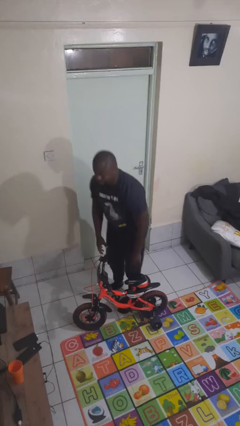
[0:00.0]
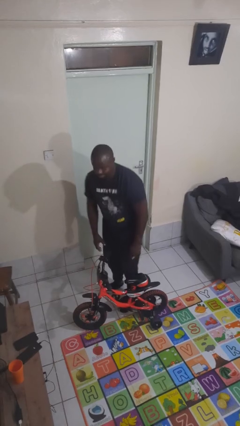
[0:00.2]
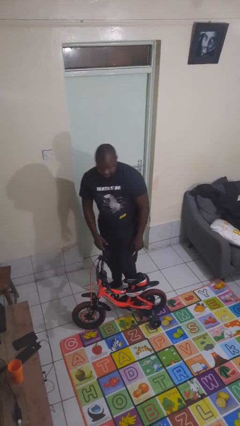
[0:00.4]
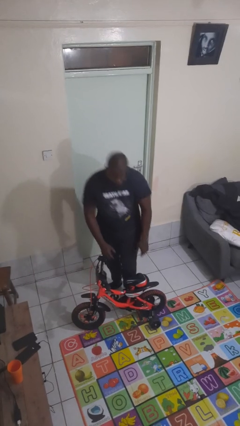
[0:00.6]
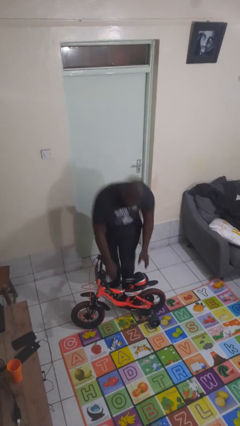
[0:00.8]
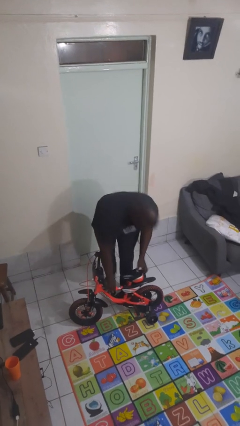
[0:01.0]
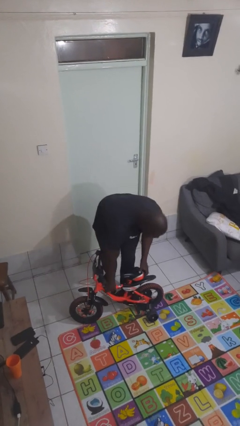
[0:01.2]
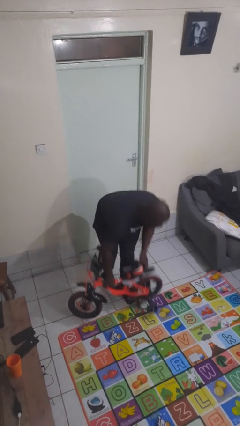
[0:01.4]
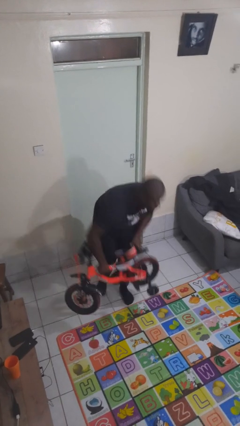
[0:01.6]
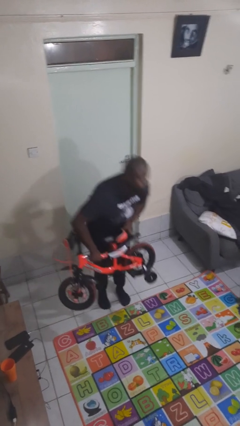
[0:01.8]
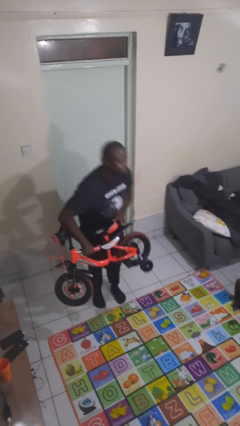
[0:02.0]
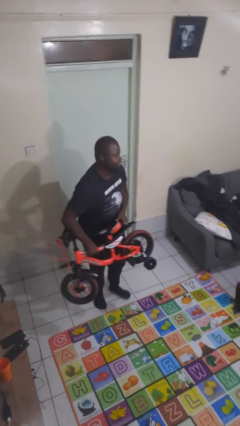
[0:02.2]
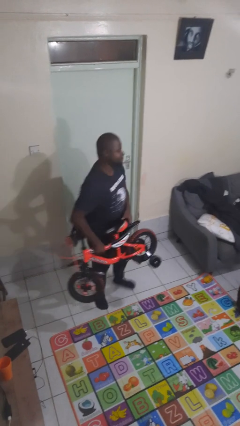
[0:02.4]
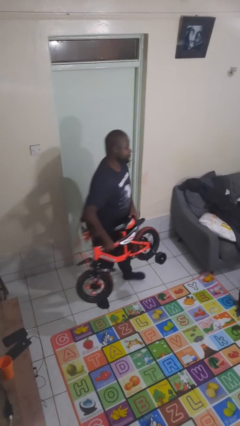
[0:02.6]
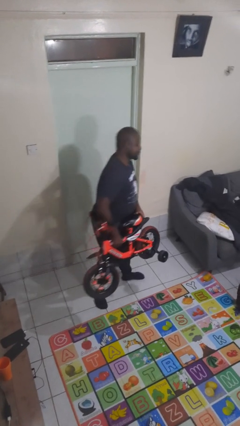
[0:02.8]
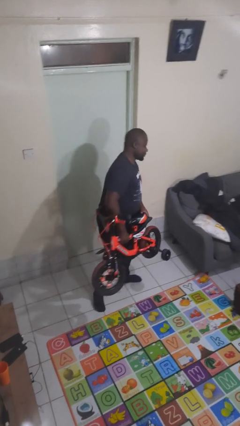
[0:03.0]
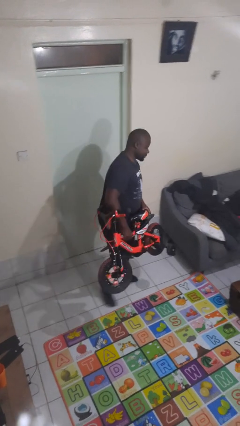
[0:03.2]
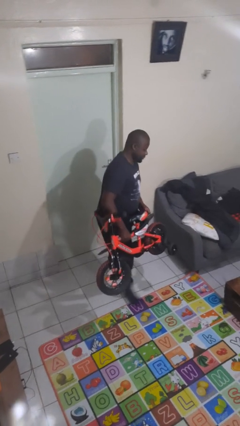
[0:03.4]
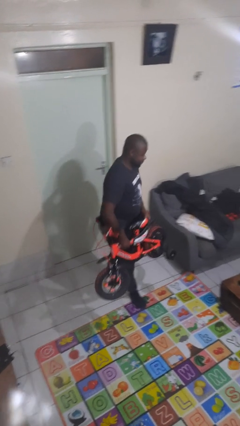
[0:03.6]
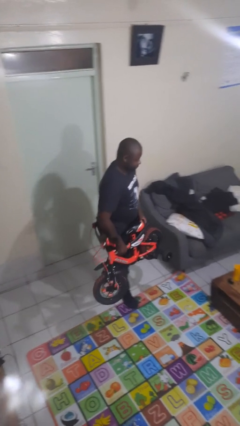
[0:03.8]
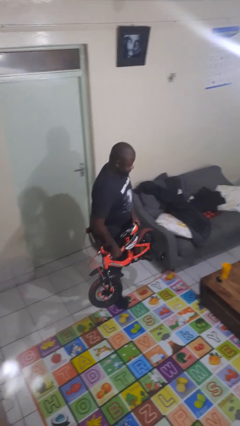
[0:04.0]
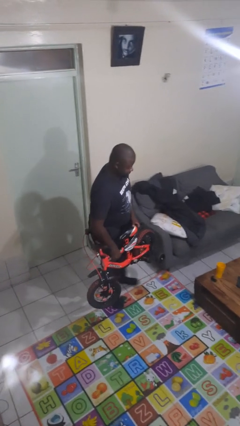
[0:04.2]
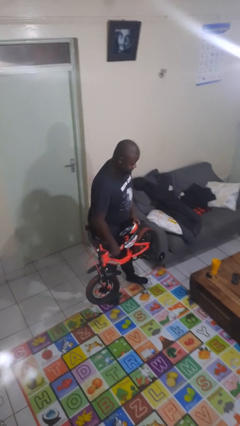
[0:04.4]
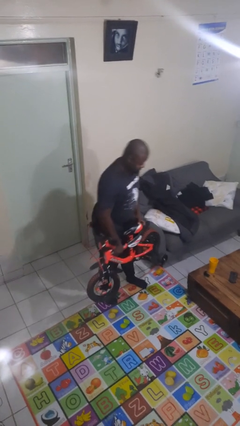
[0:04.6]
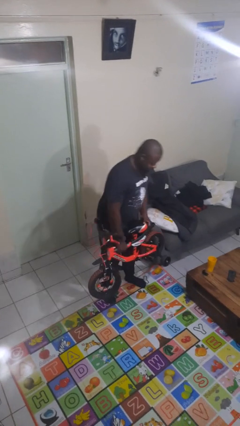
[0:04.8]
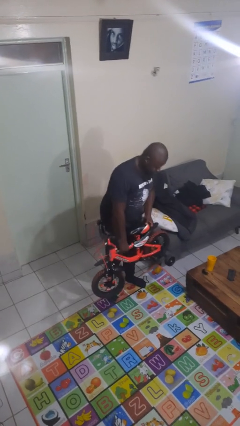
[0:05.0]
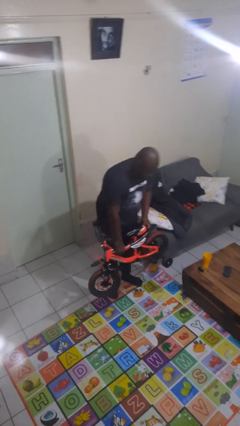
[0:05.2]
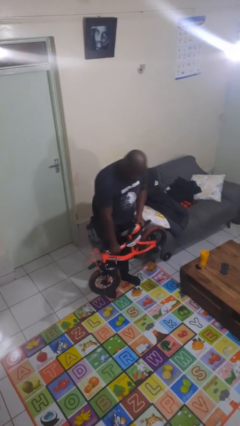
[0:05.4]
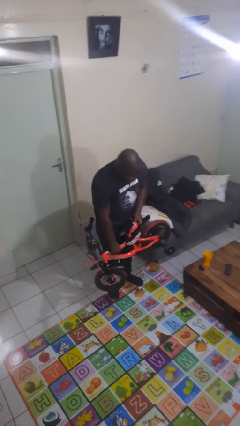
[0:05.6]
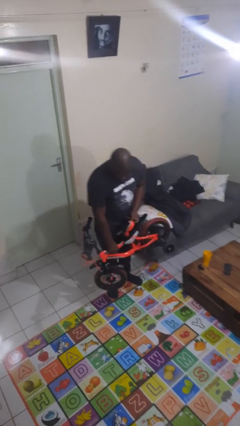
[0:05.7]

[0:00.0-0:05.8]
person carries bicycle

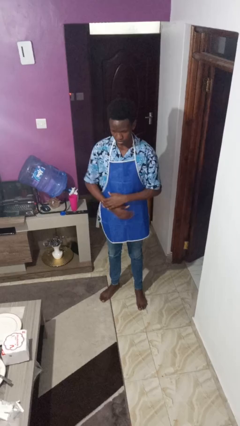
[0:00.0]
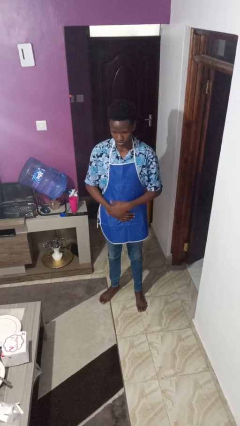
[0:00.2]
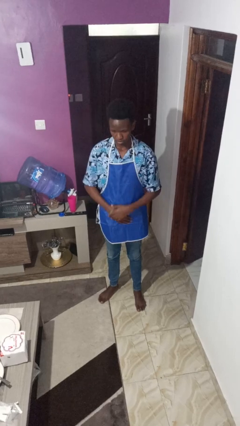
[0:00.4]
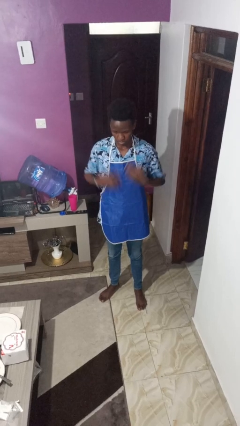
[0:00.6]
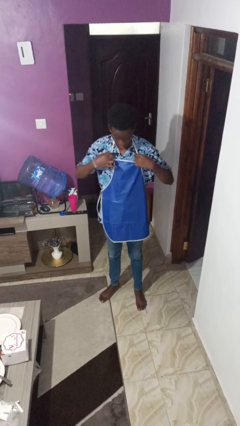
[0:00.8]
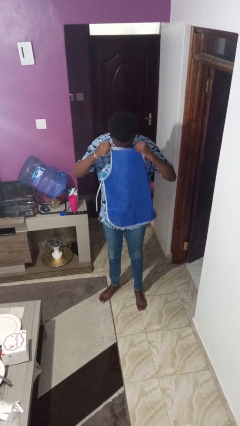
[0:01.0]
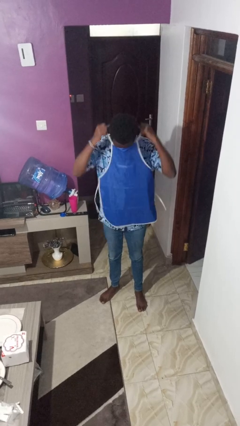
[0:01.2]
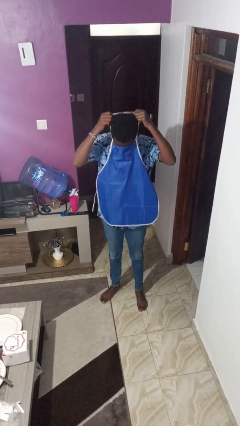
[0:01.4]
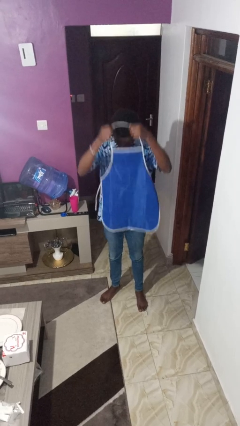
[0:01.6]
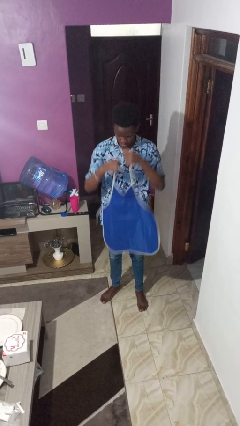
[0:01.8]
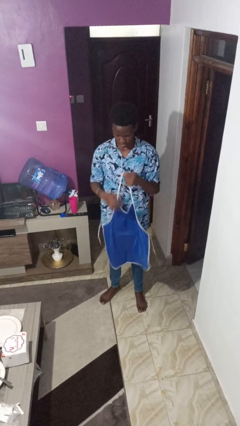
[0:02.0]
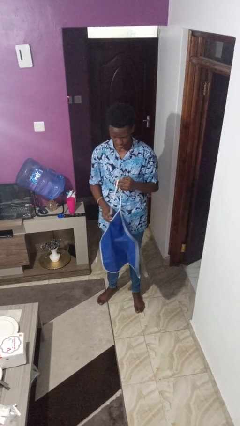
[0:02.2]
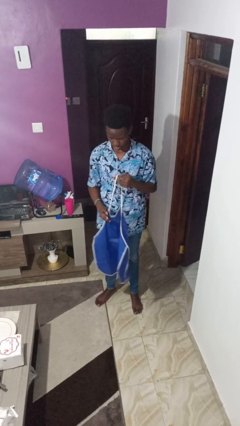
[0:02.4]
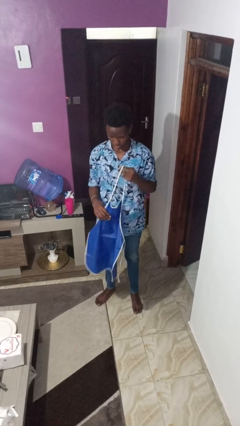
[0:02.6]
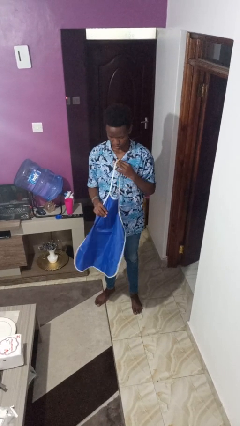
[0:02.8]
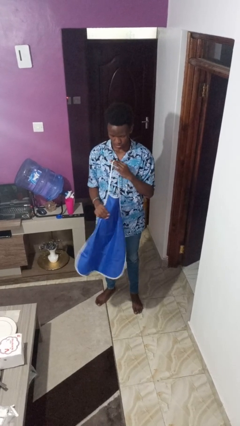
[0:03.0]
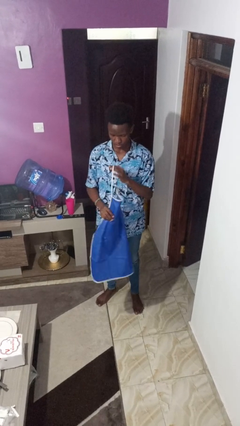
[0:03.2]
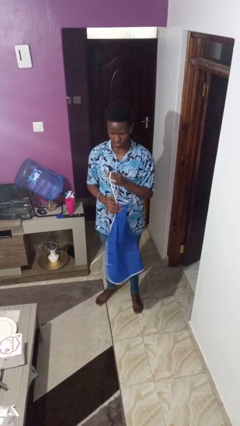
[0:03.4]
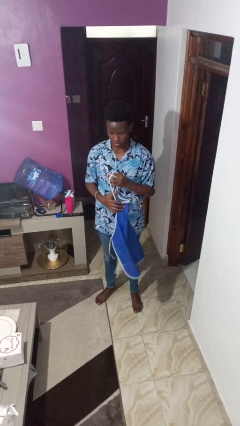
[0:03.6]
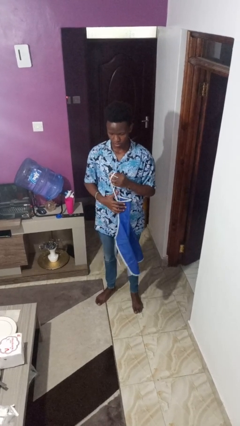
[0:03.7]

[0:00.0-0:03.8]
person takes off apron

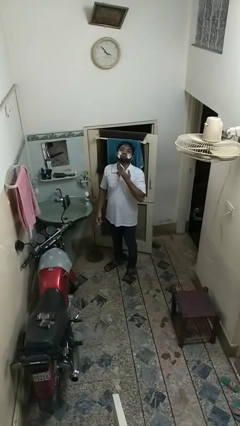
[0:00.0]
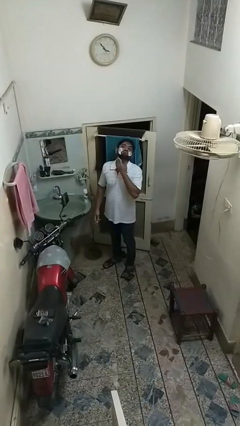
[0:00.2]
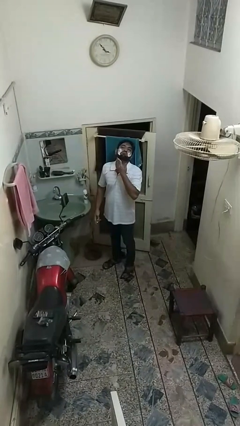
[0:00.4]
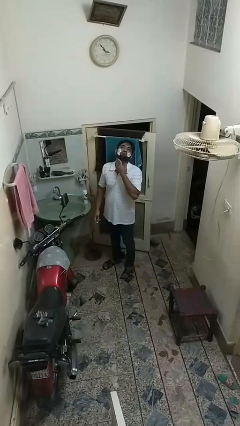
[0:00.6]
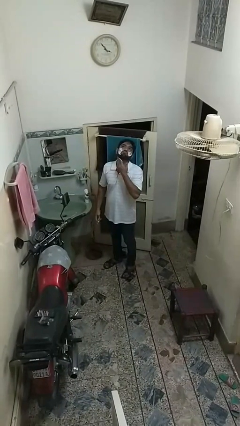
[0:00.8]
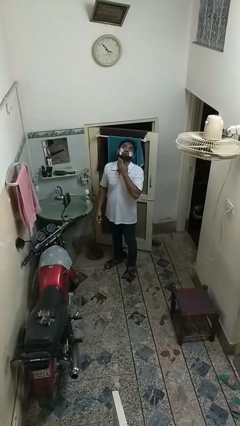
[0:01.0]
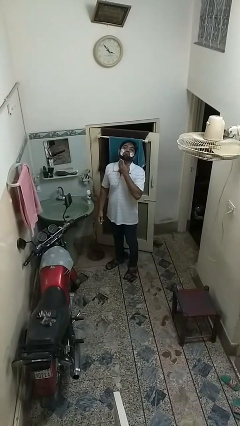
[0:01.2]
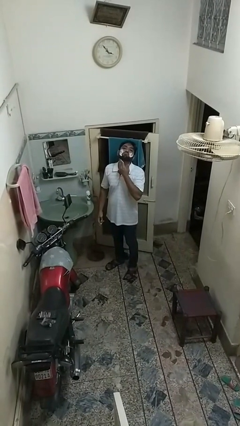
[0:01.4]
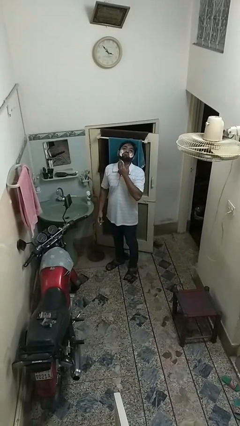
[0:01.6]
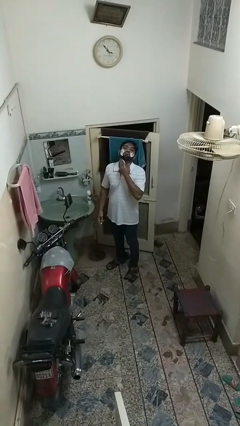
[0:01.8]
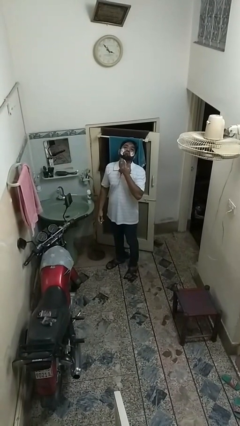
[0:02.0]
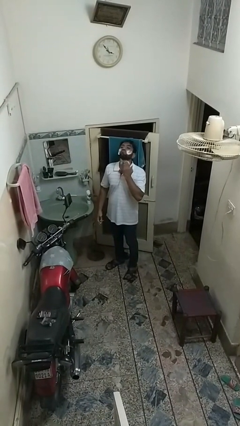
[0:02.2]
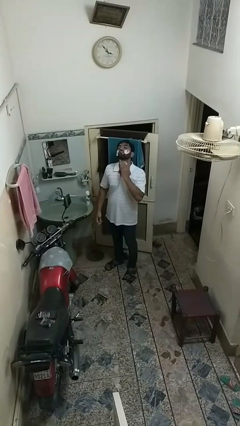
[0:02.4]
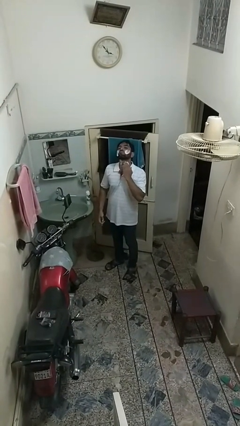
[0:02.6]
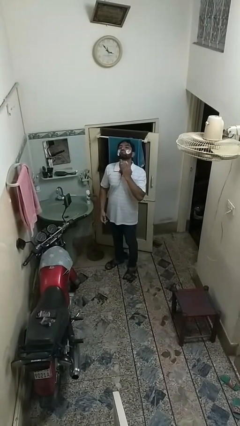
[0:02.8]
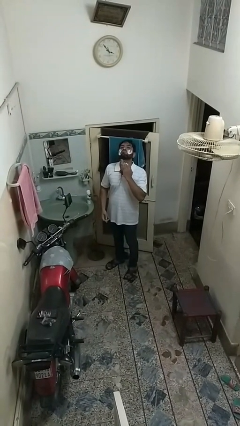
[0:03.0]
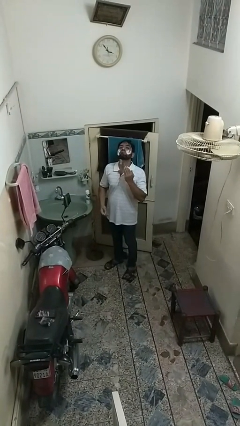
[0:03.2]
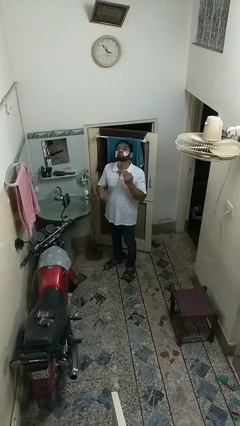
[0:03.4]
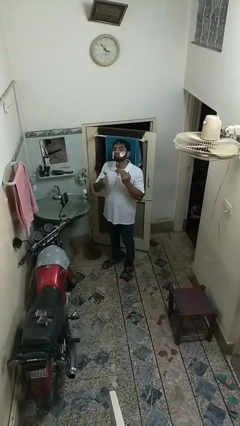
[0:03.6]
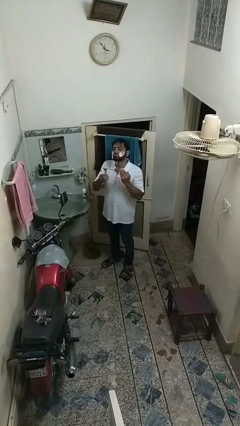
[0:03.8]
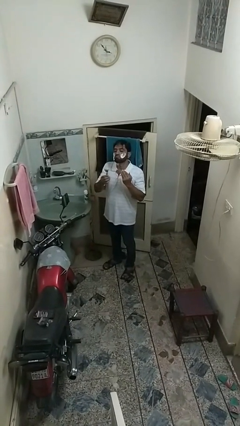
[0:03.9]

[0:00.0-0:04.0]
person applies shaving cream

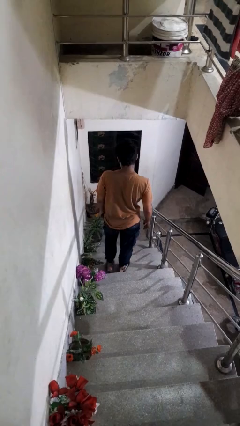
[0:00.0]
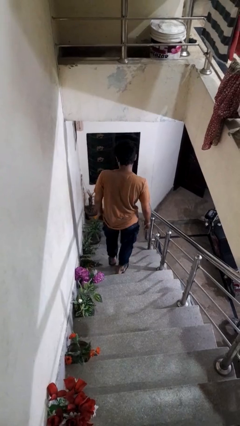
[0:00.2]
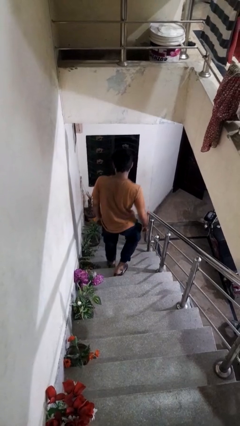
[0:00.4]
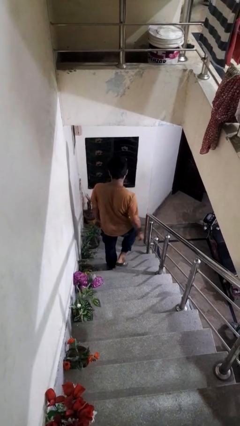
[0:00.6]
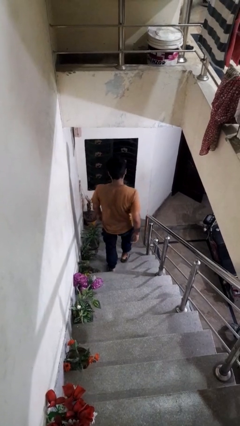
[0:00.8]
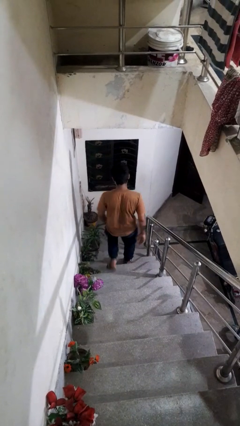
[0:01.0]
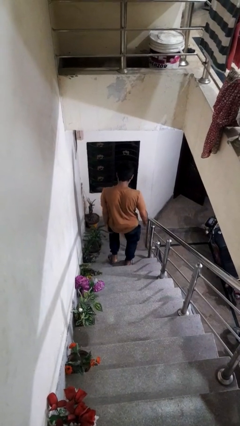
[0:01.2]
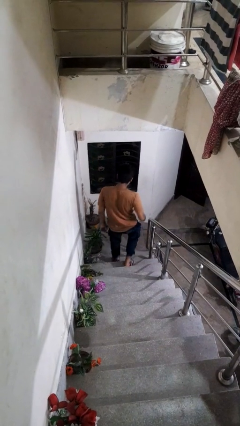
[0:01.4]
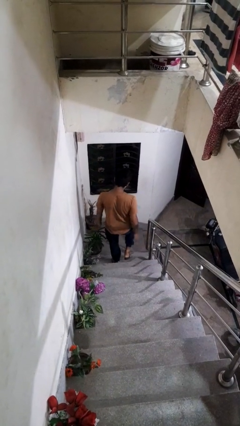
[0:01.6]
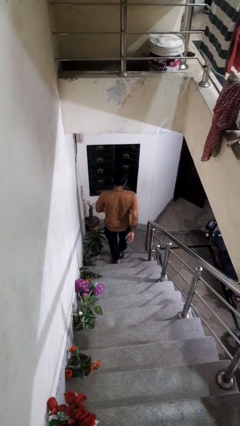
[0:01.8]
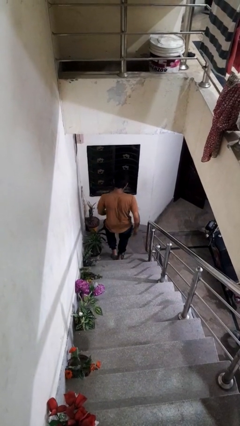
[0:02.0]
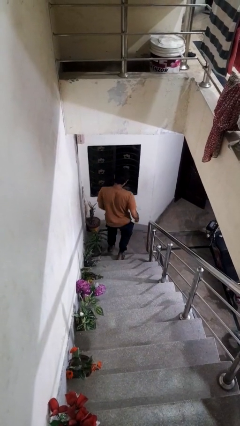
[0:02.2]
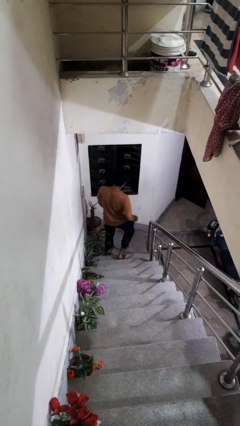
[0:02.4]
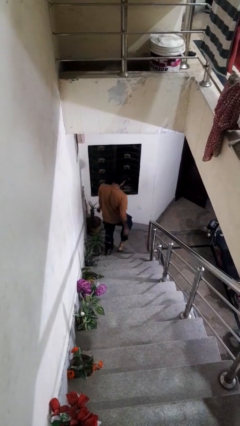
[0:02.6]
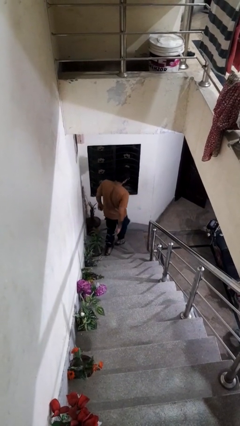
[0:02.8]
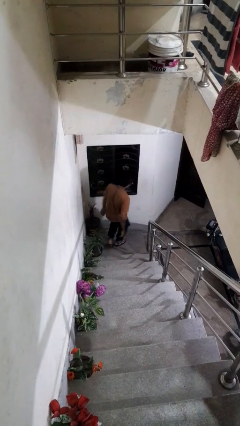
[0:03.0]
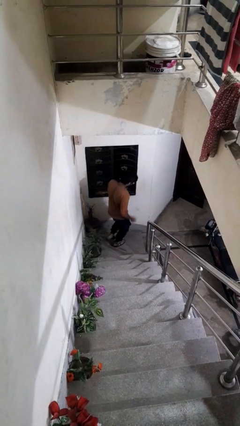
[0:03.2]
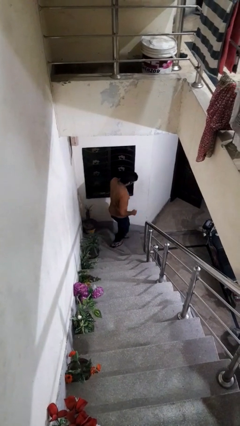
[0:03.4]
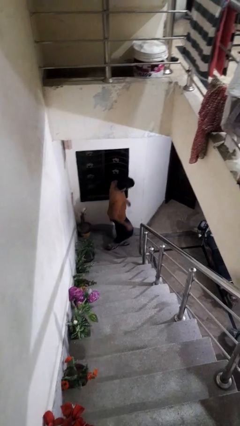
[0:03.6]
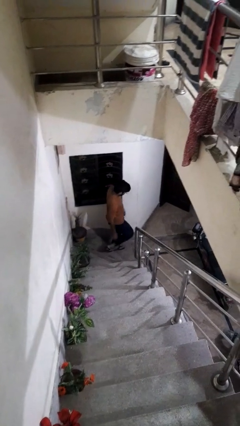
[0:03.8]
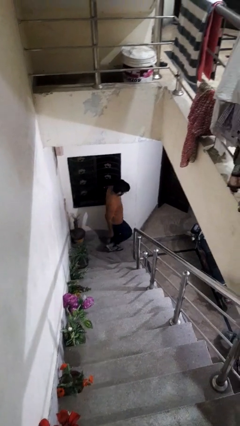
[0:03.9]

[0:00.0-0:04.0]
person climbs down stairs
